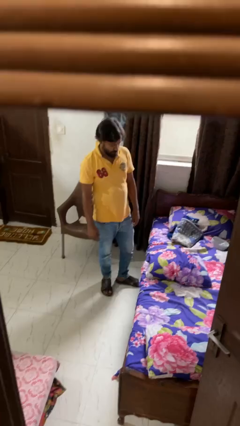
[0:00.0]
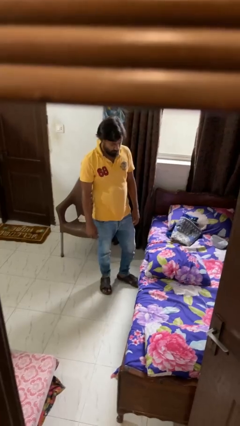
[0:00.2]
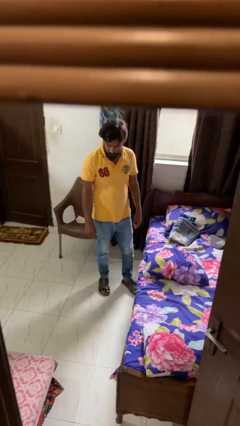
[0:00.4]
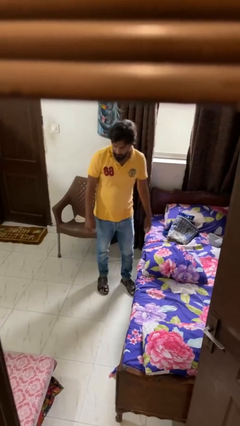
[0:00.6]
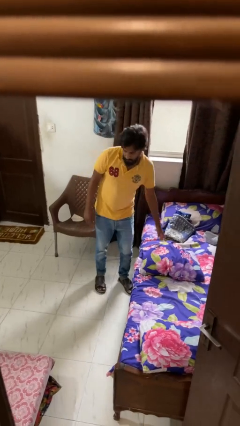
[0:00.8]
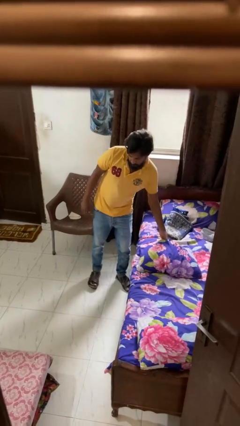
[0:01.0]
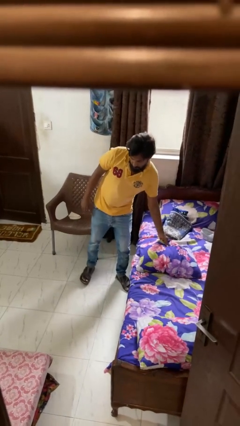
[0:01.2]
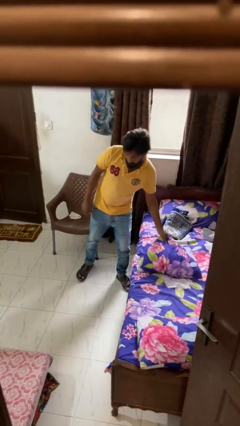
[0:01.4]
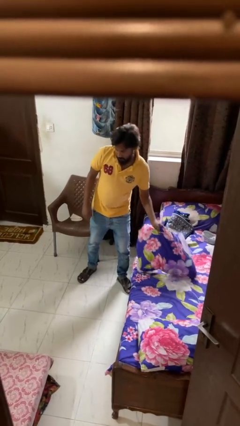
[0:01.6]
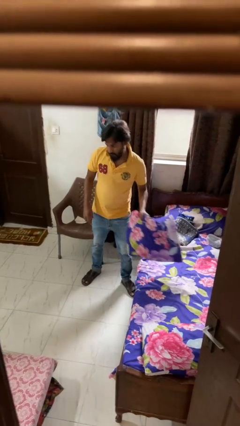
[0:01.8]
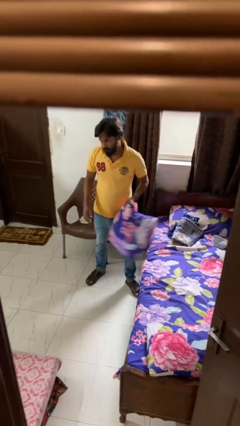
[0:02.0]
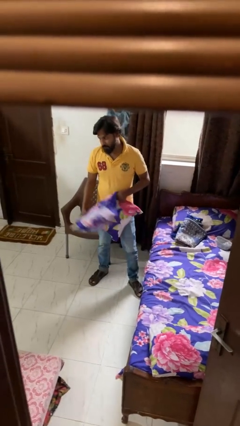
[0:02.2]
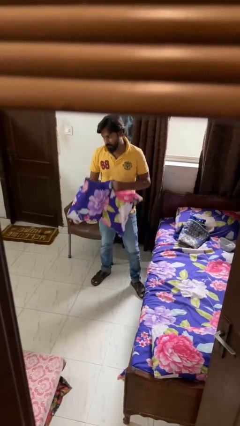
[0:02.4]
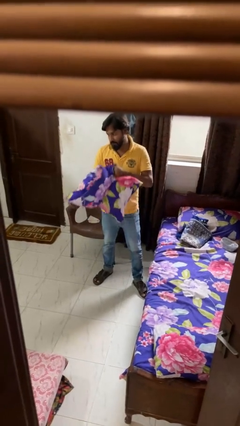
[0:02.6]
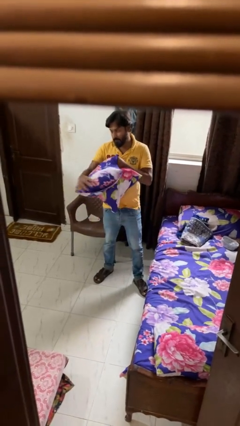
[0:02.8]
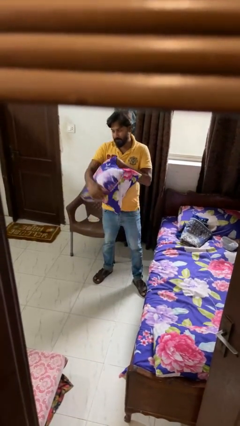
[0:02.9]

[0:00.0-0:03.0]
person picks up object from bed

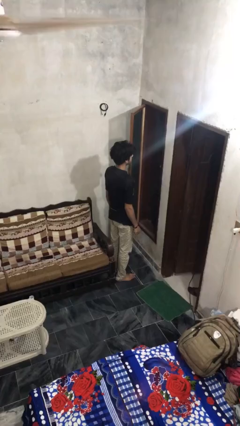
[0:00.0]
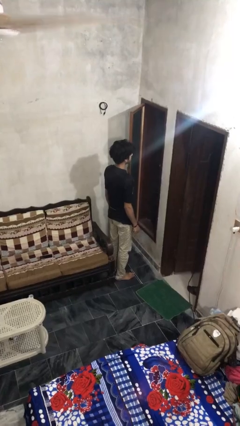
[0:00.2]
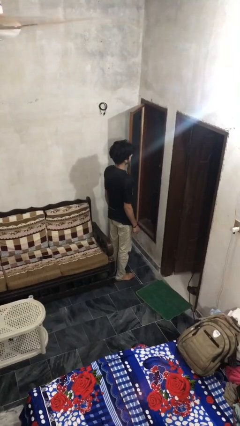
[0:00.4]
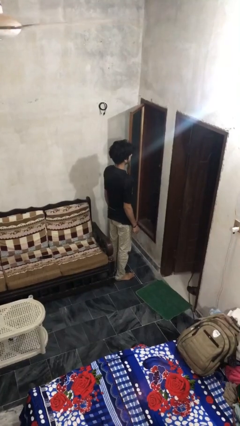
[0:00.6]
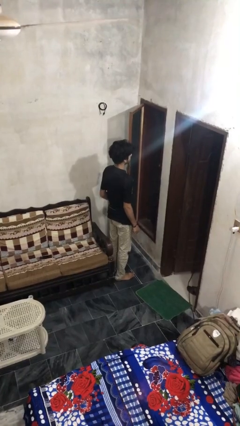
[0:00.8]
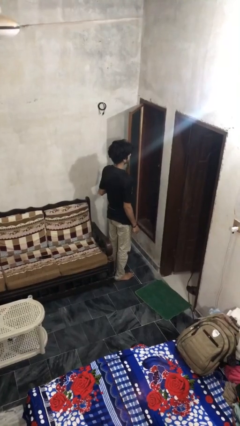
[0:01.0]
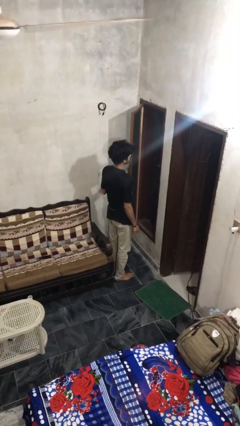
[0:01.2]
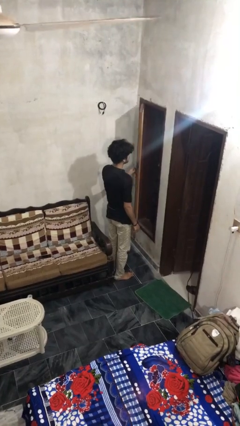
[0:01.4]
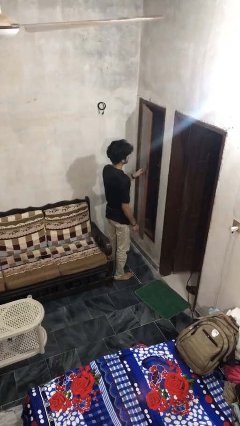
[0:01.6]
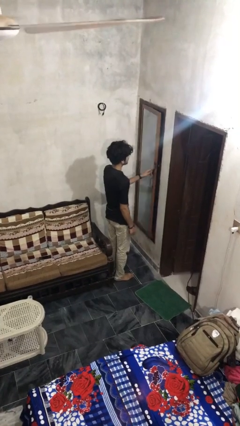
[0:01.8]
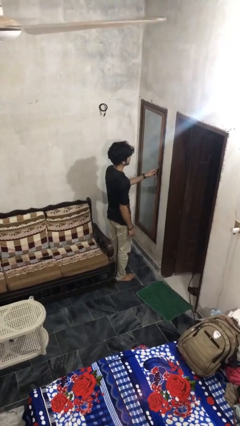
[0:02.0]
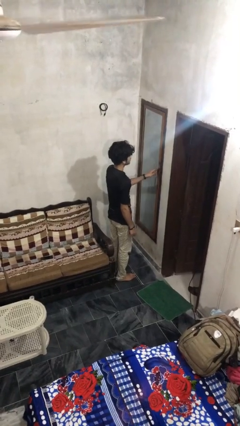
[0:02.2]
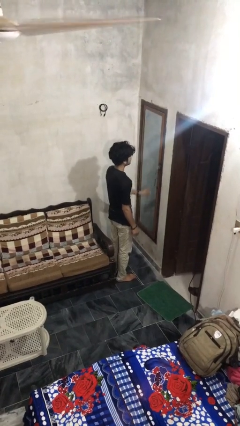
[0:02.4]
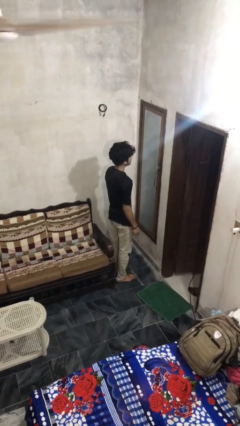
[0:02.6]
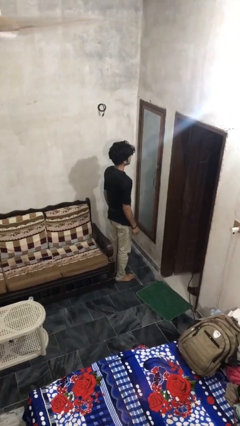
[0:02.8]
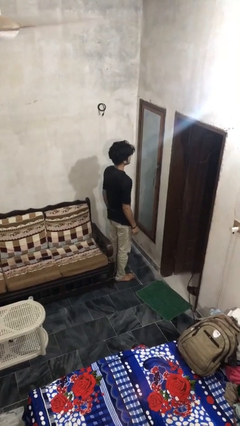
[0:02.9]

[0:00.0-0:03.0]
person closes home window

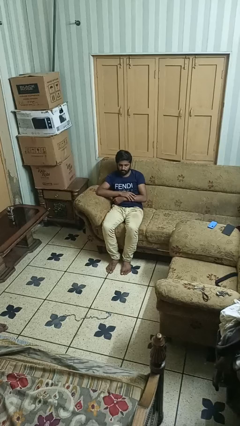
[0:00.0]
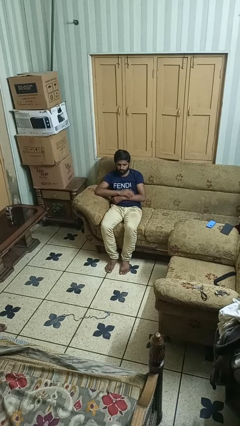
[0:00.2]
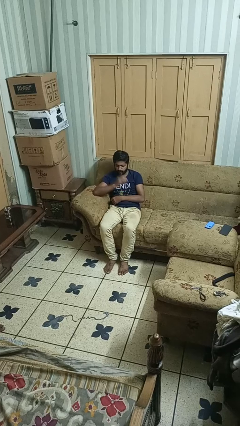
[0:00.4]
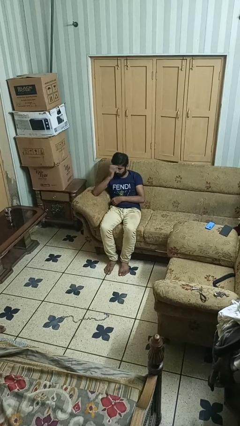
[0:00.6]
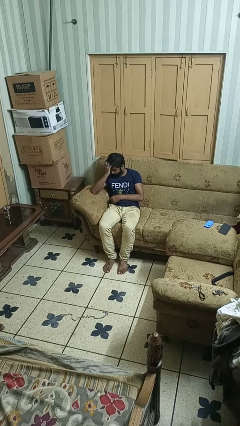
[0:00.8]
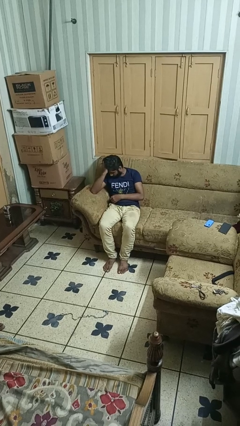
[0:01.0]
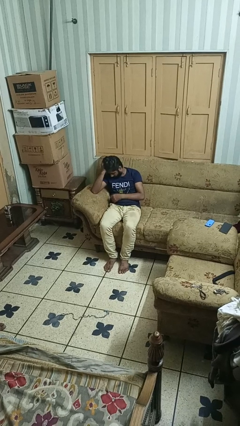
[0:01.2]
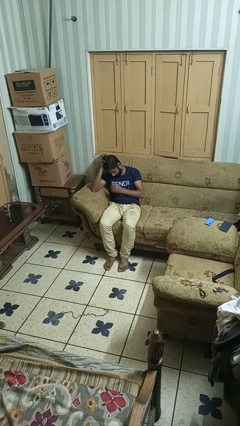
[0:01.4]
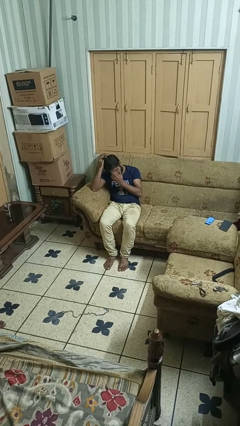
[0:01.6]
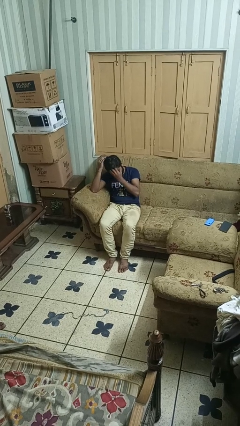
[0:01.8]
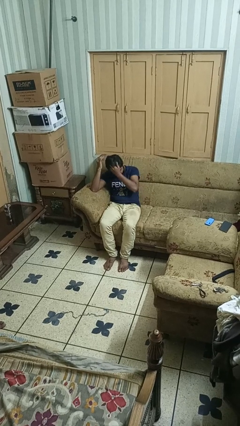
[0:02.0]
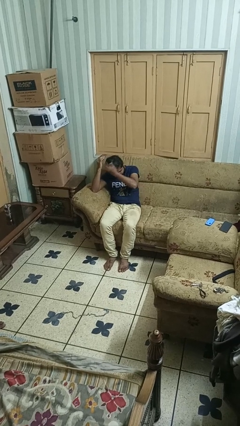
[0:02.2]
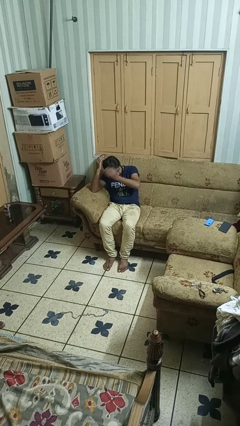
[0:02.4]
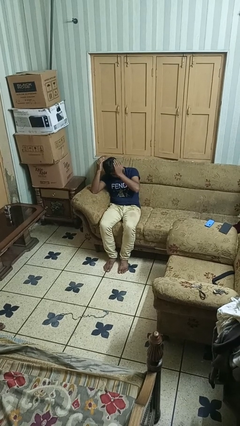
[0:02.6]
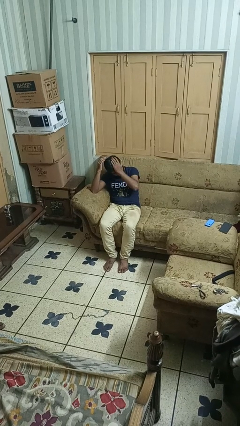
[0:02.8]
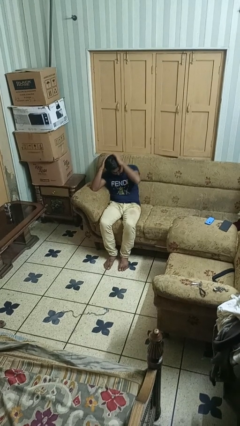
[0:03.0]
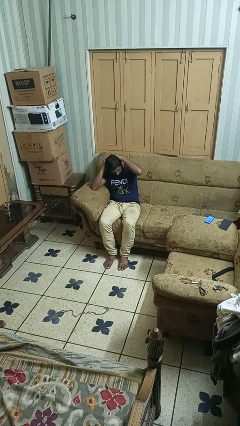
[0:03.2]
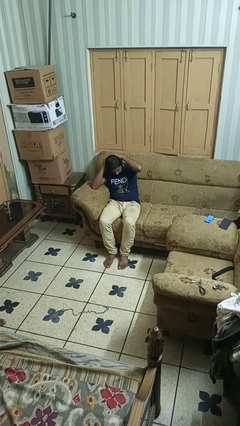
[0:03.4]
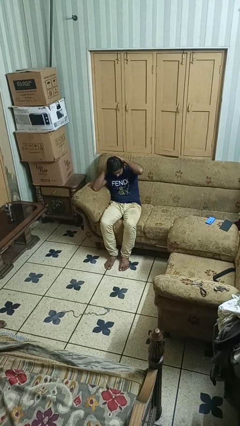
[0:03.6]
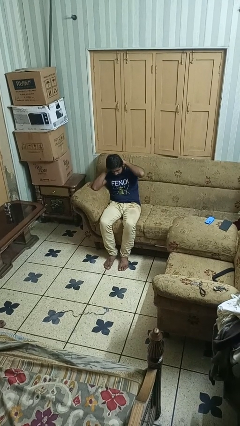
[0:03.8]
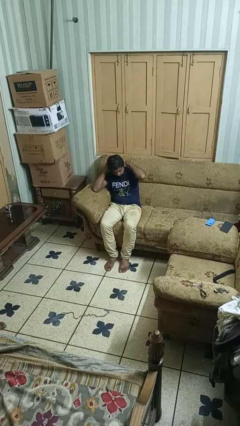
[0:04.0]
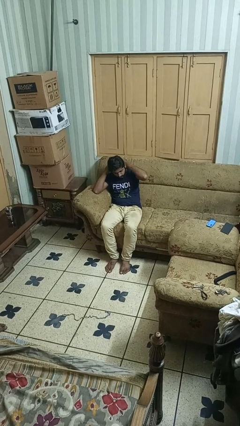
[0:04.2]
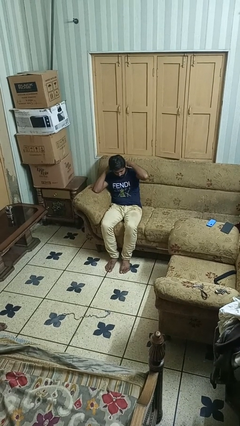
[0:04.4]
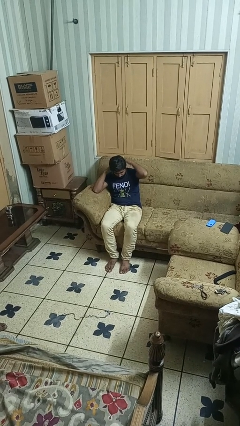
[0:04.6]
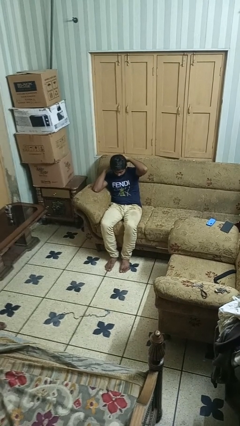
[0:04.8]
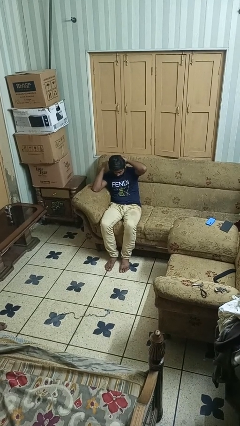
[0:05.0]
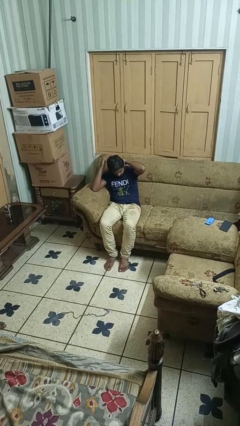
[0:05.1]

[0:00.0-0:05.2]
person strokes hair

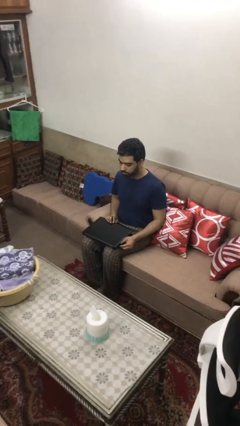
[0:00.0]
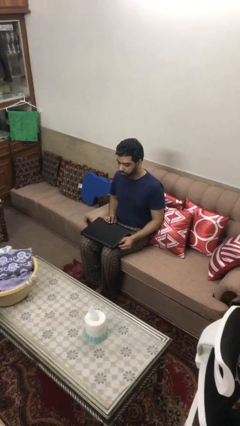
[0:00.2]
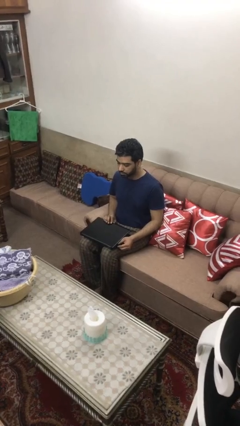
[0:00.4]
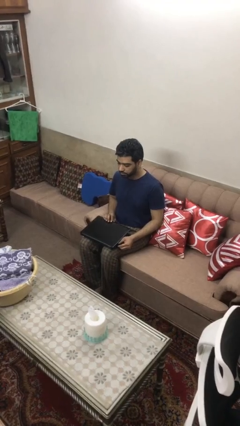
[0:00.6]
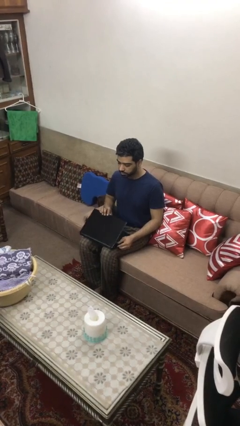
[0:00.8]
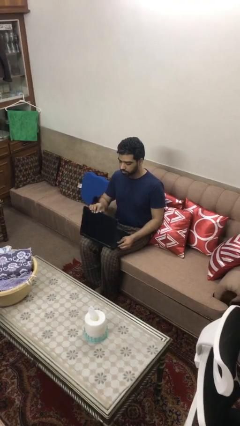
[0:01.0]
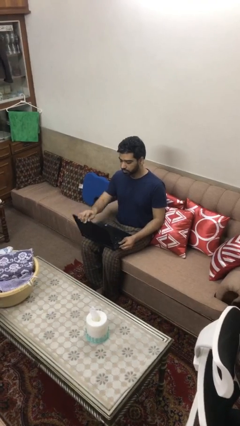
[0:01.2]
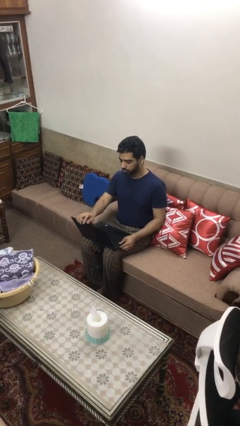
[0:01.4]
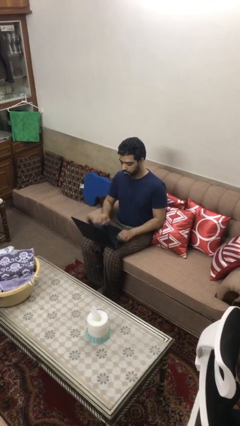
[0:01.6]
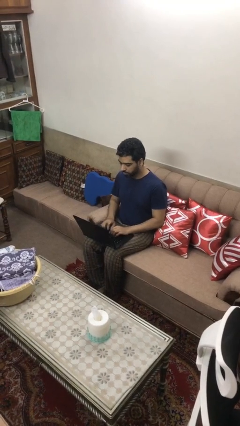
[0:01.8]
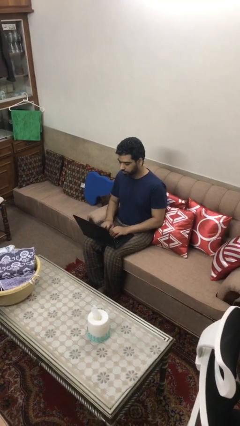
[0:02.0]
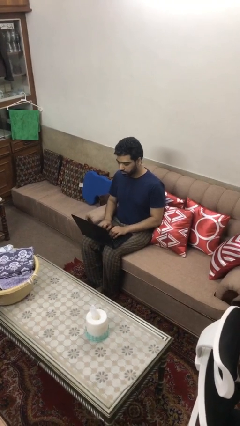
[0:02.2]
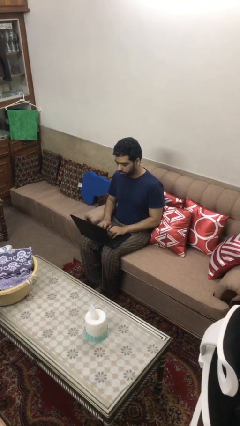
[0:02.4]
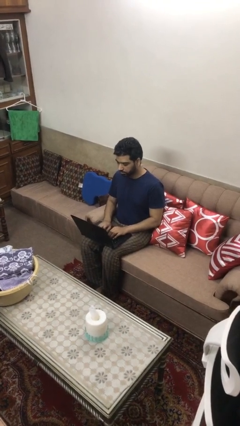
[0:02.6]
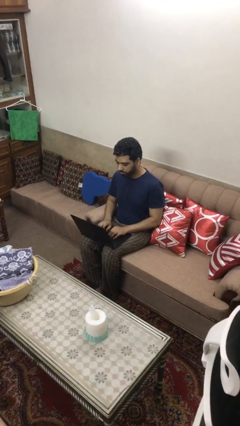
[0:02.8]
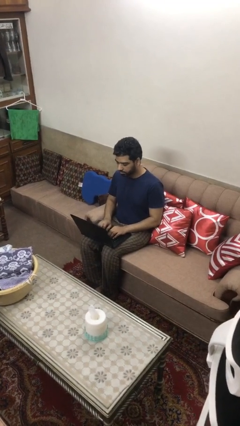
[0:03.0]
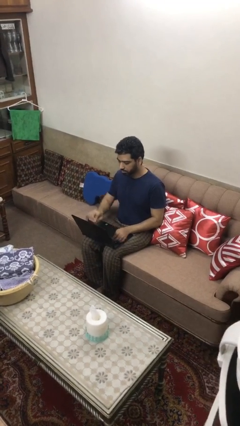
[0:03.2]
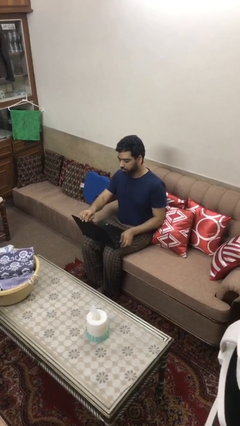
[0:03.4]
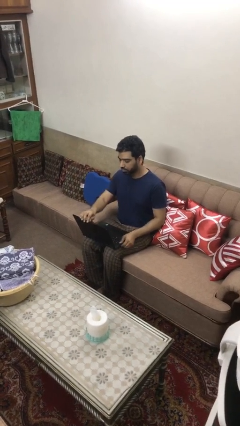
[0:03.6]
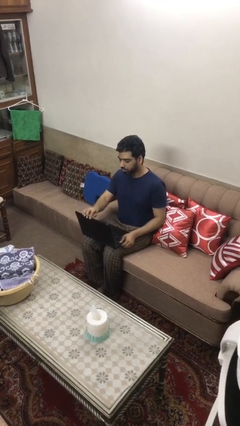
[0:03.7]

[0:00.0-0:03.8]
person interacts with laptop

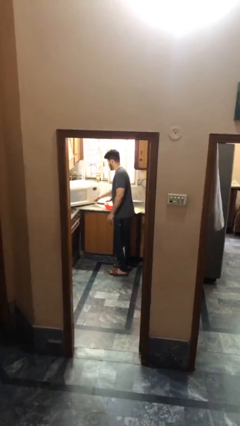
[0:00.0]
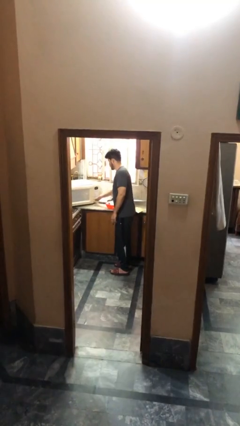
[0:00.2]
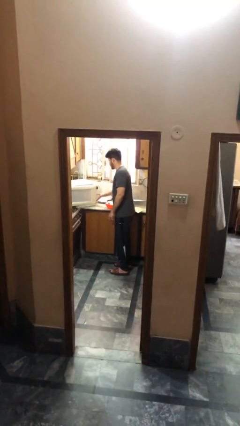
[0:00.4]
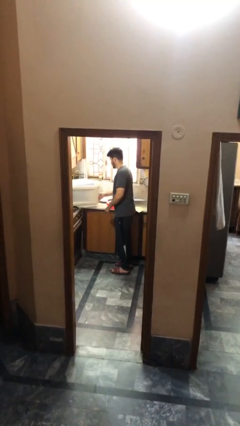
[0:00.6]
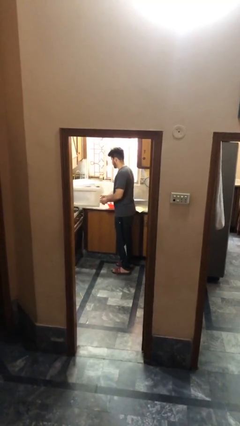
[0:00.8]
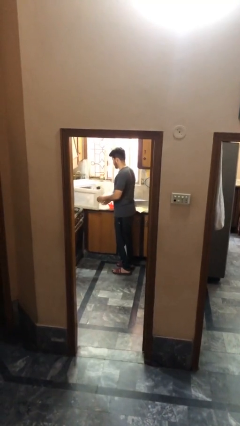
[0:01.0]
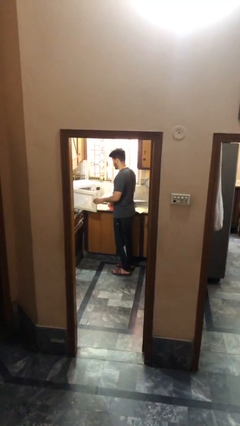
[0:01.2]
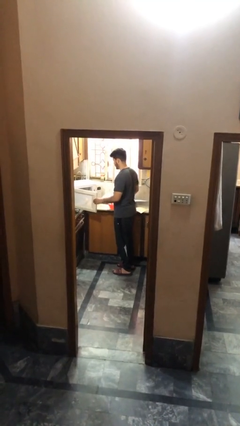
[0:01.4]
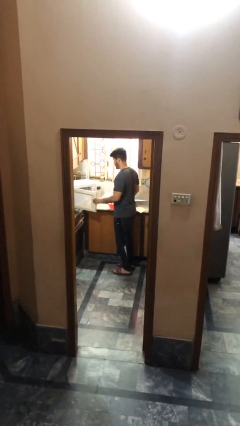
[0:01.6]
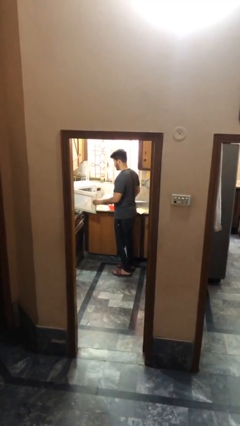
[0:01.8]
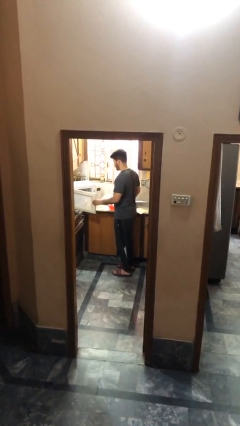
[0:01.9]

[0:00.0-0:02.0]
person opens microwave

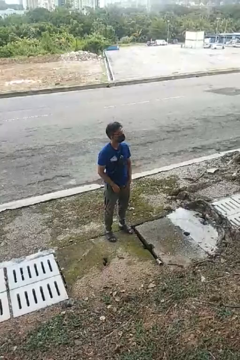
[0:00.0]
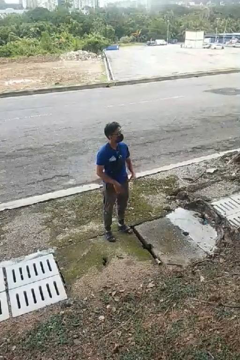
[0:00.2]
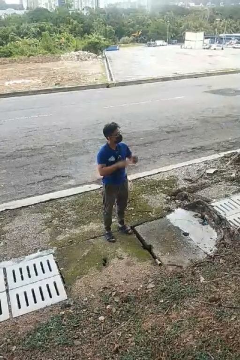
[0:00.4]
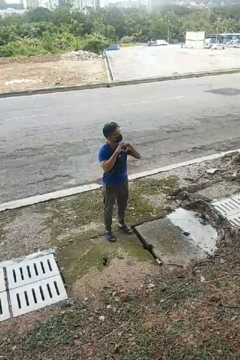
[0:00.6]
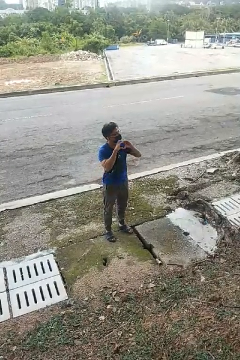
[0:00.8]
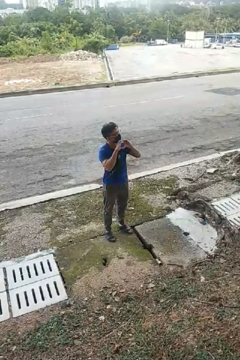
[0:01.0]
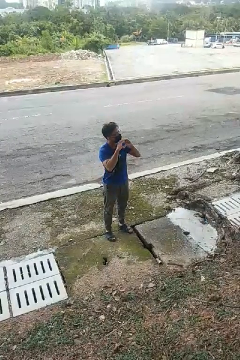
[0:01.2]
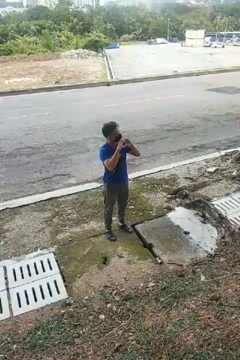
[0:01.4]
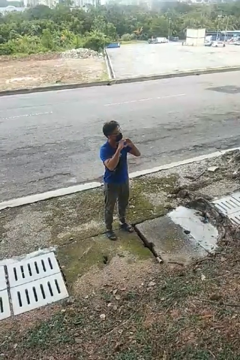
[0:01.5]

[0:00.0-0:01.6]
person gestures heart
